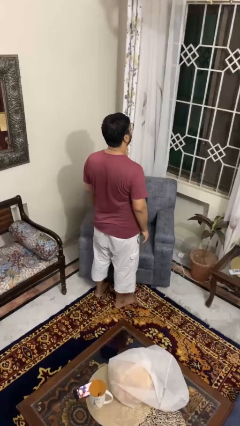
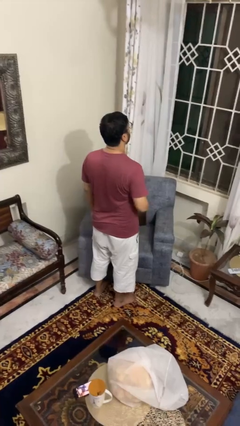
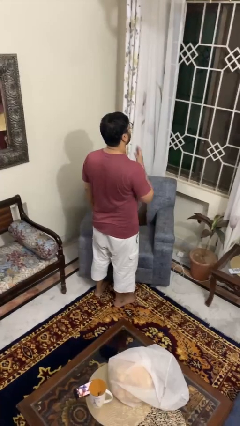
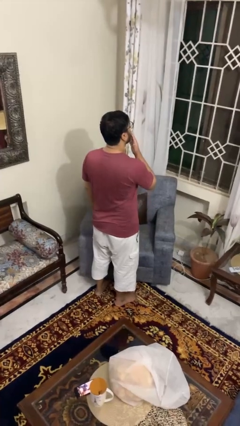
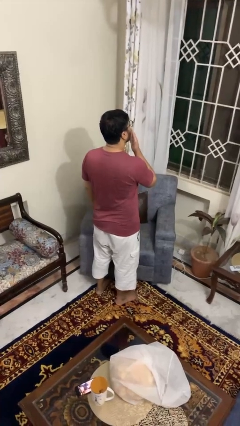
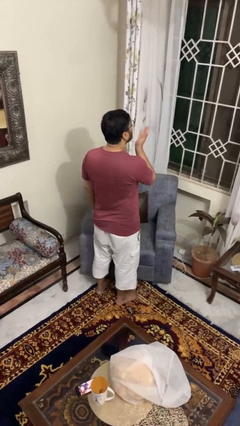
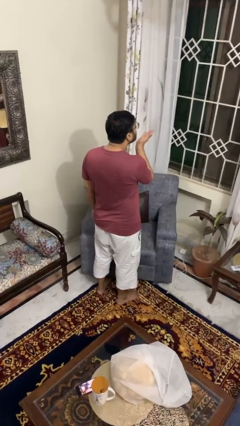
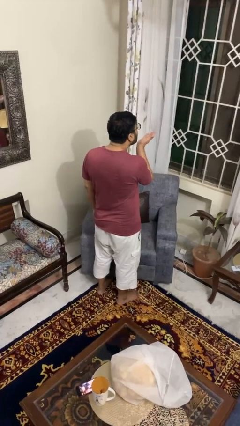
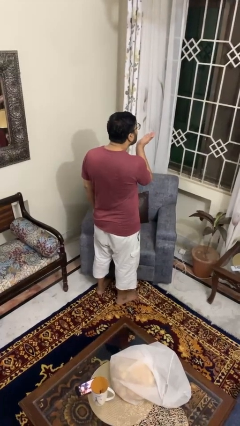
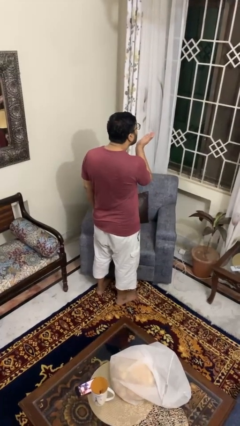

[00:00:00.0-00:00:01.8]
person gestures blow kiss

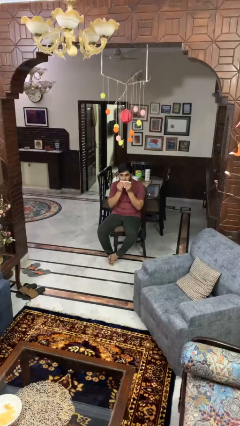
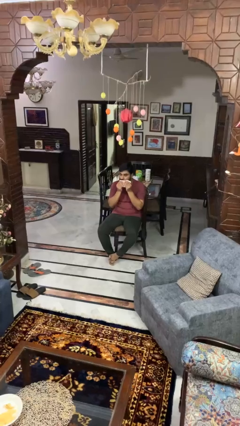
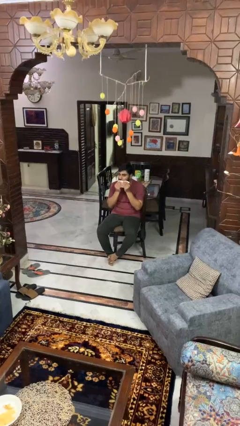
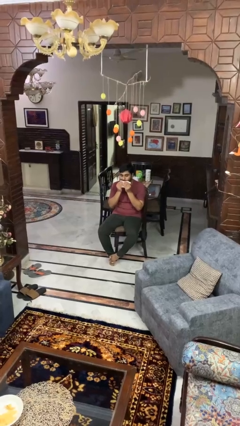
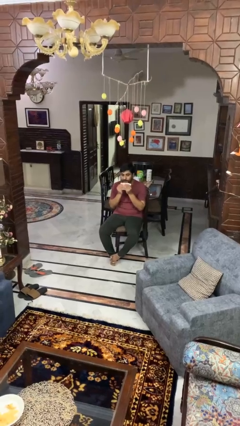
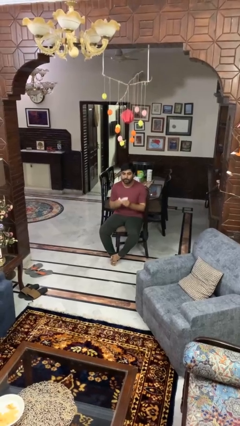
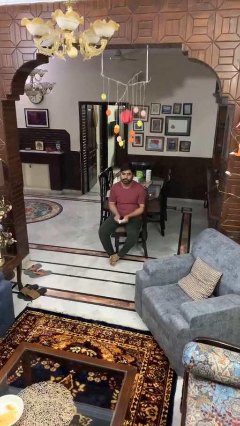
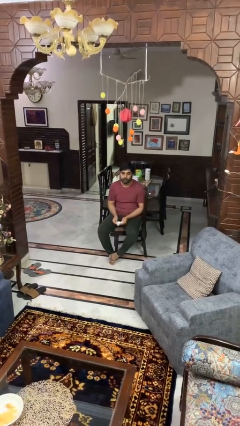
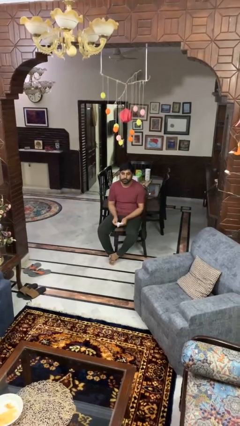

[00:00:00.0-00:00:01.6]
person wipes mouth with napkin

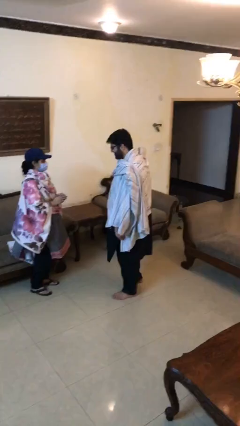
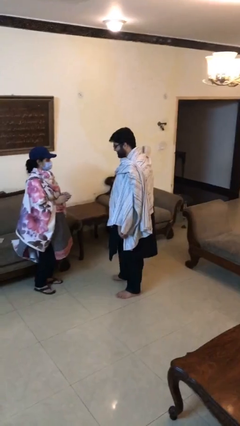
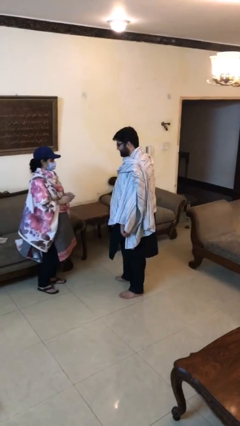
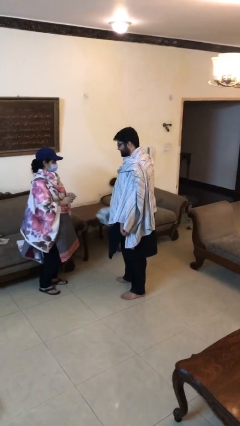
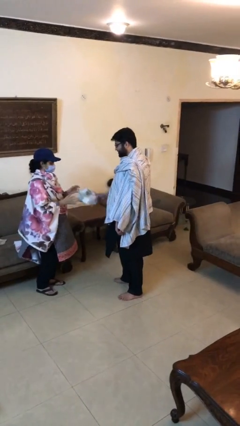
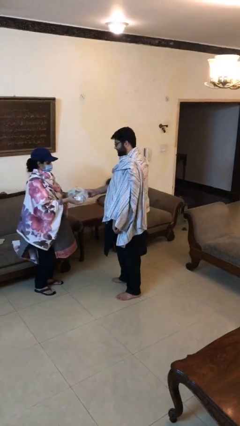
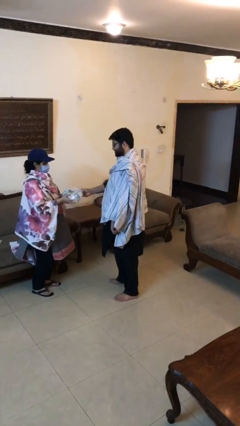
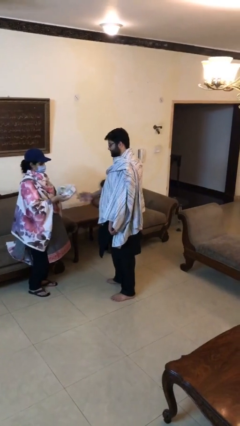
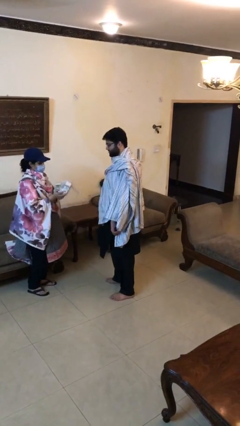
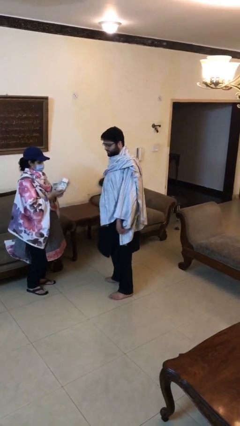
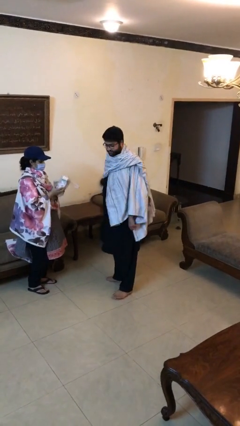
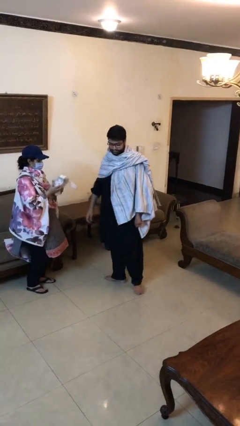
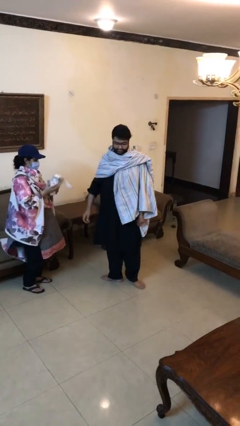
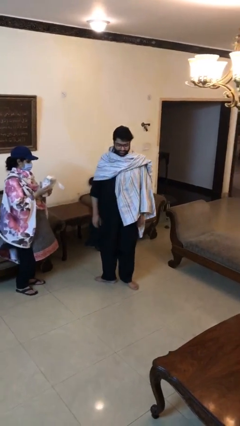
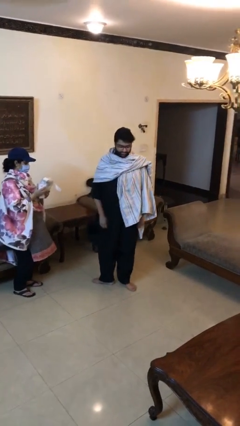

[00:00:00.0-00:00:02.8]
person transfers object to person

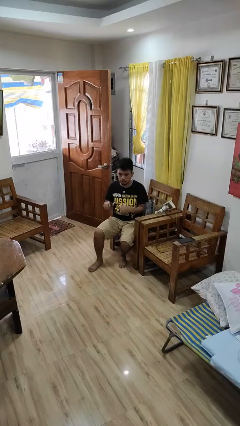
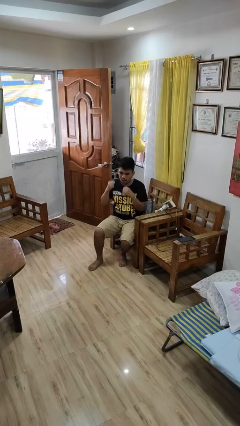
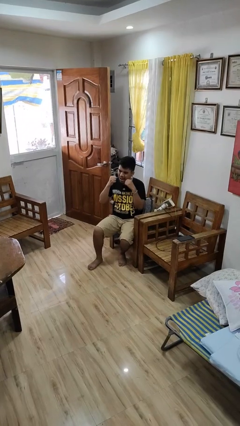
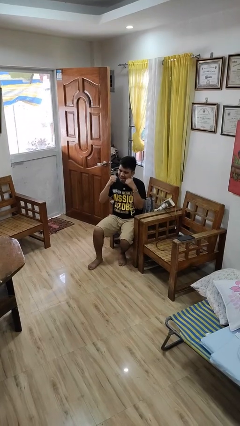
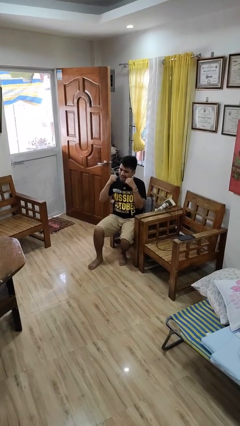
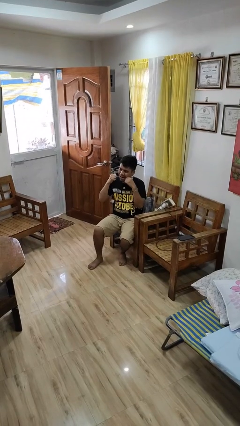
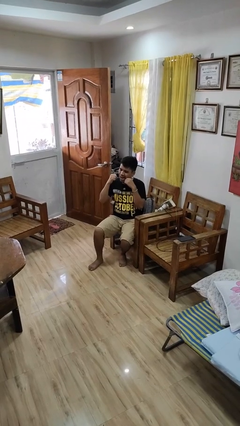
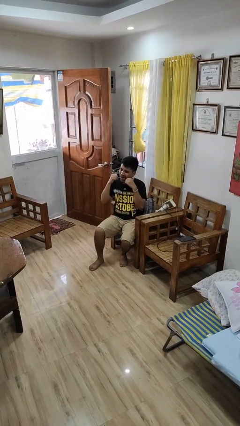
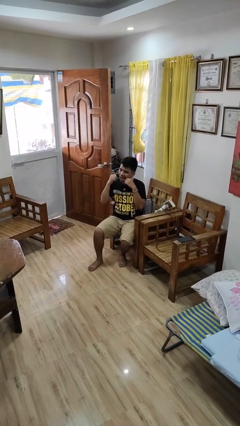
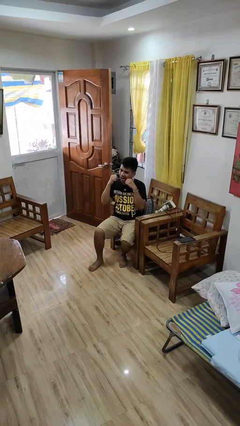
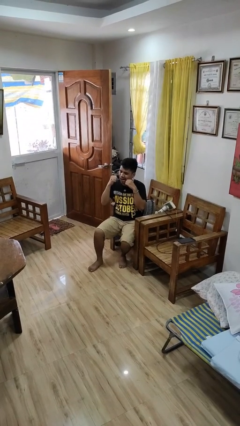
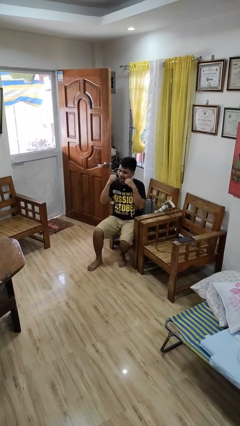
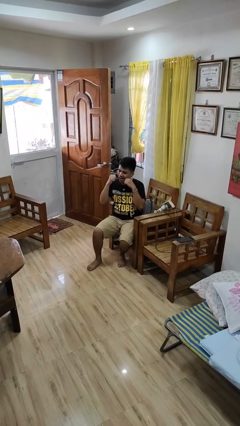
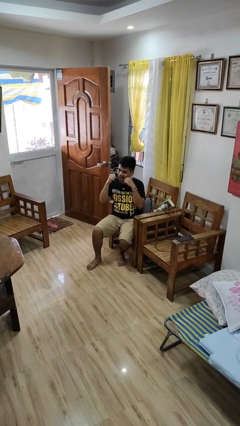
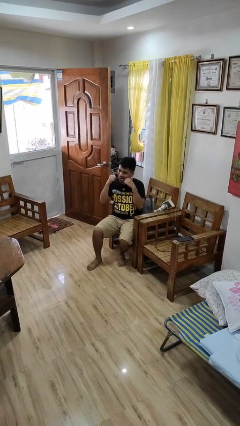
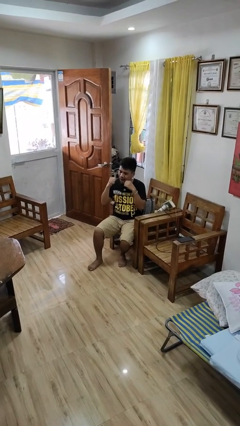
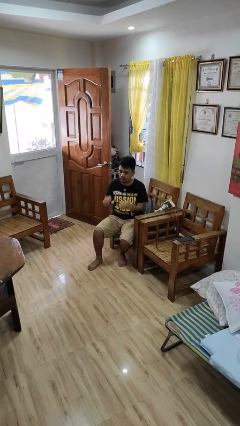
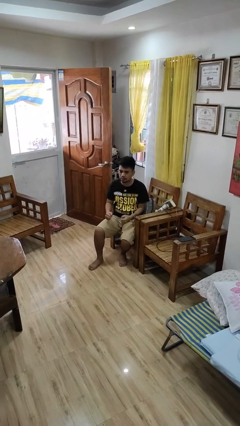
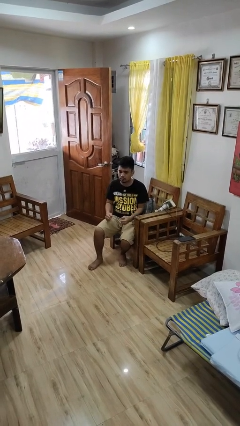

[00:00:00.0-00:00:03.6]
person flosses

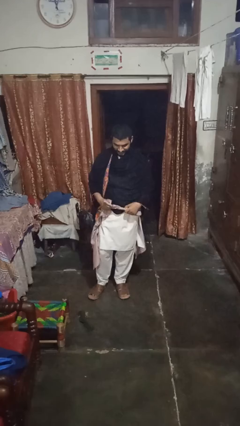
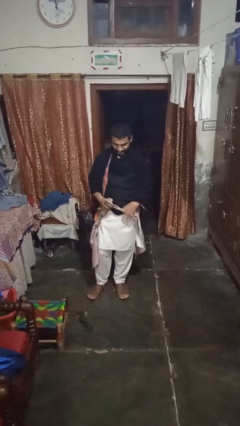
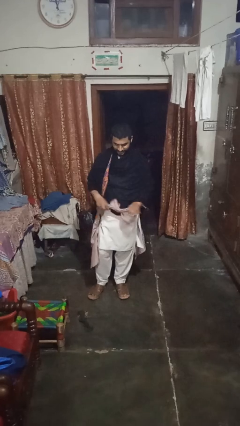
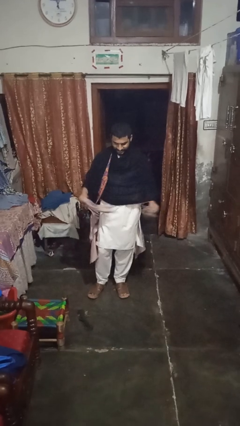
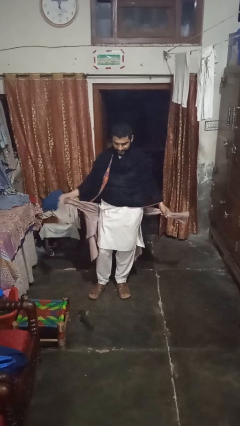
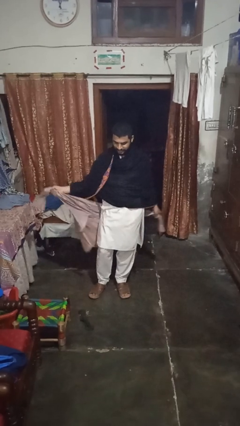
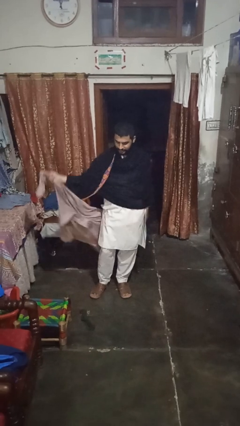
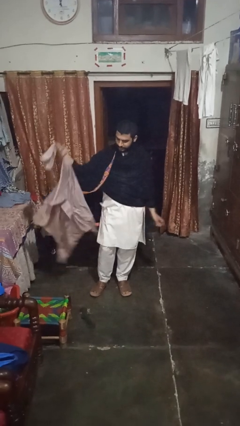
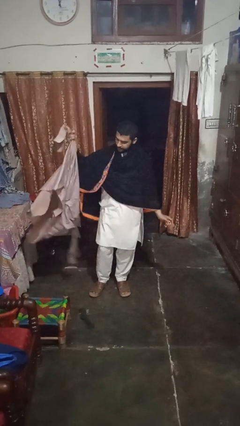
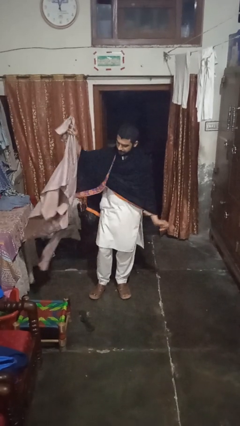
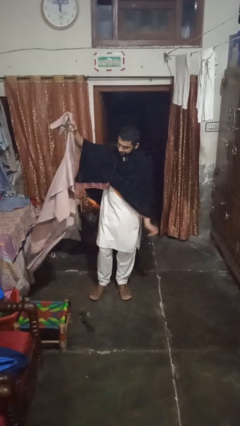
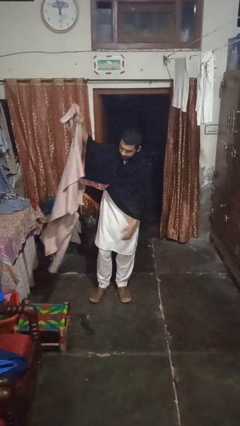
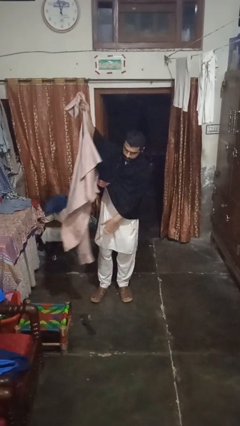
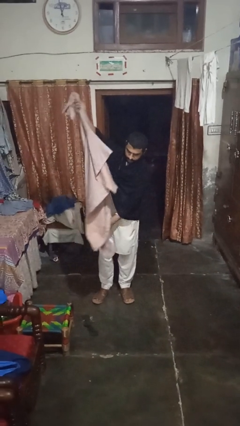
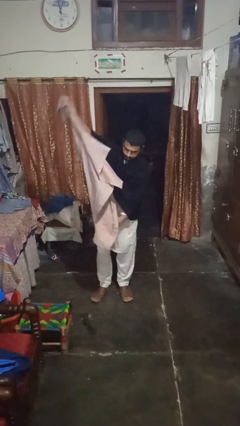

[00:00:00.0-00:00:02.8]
person unties jacket around waist

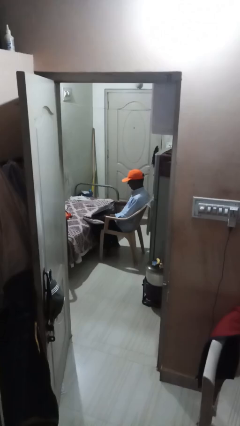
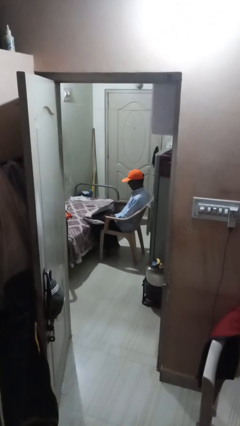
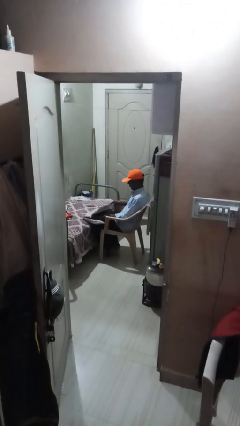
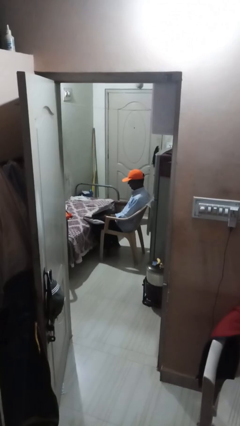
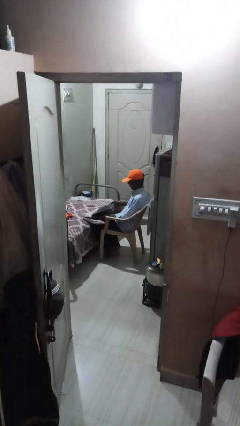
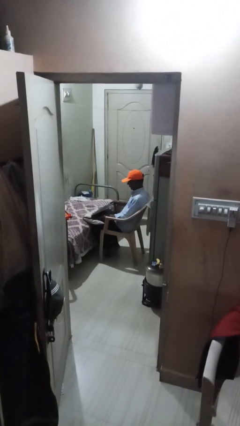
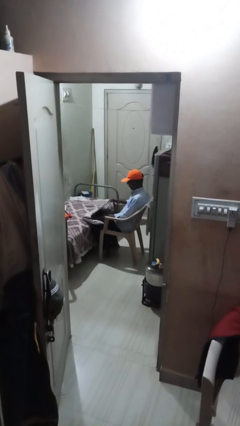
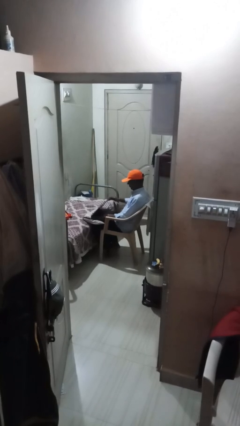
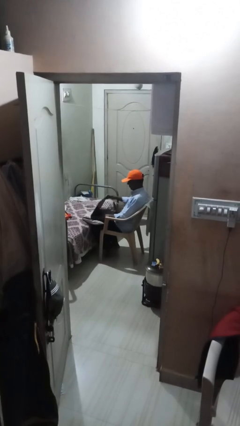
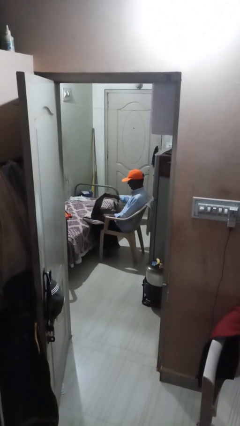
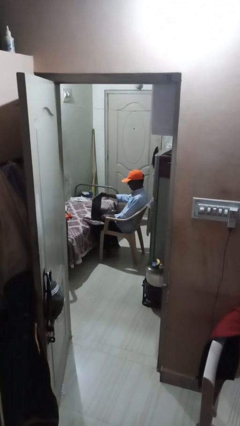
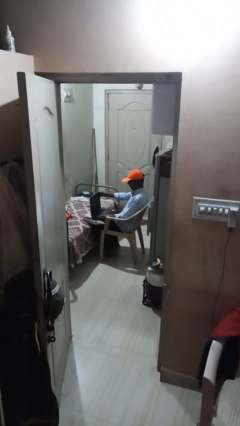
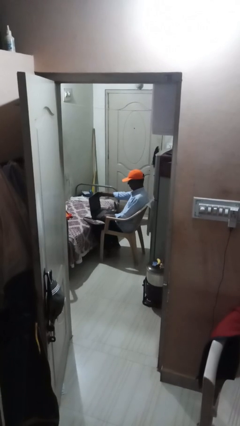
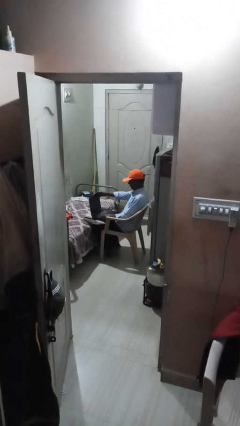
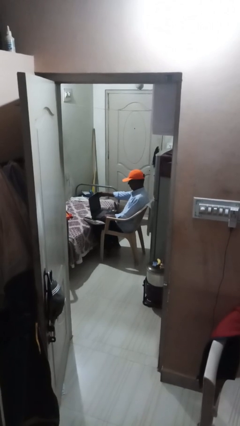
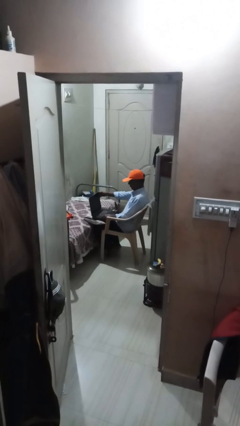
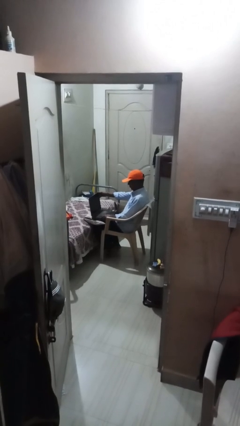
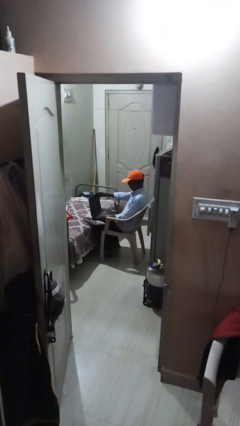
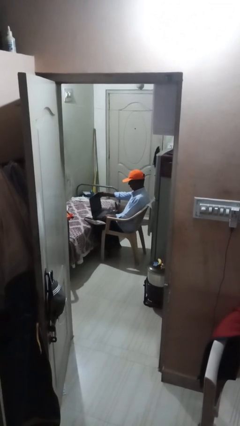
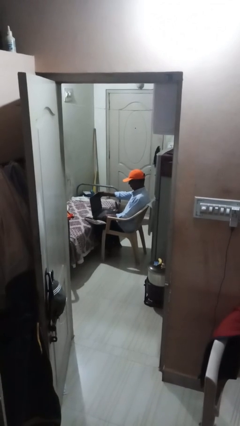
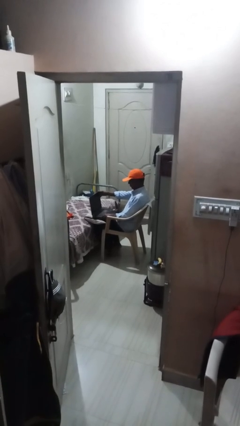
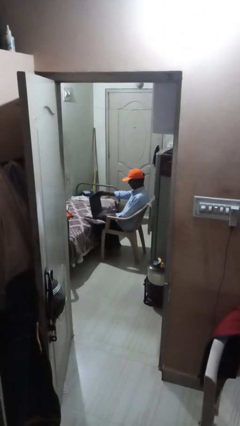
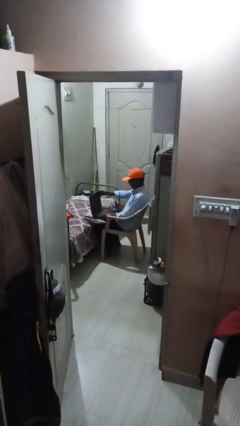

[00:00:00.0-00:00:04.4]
person interacts with laptop

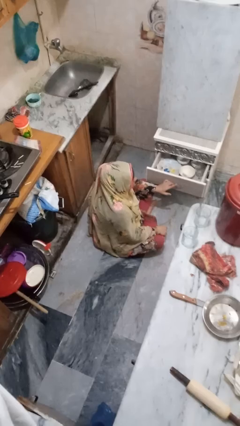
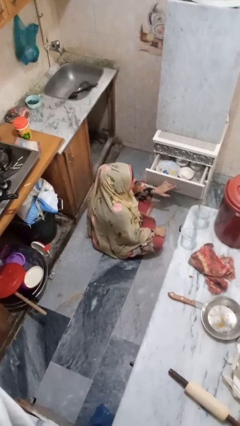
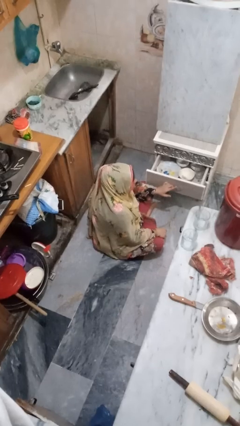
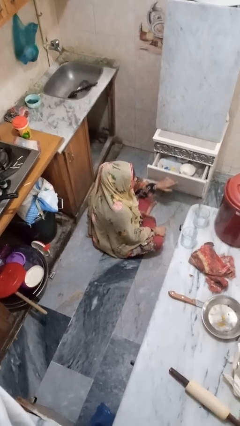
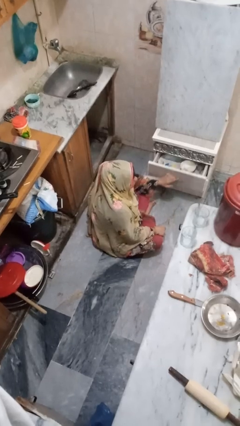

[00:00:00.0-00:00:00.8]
person closes kitchen drawer
